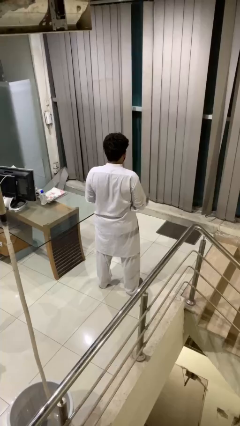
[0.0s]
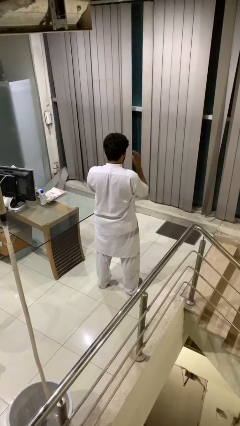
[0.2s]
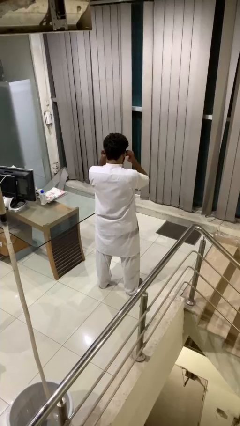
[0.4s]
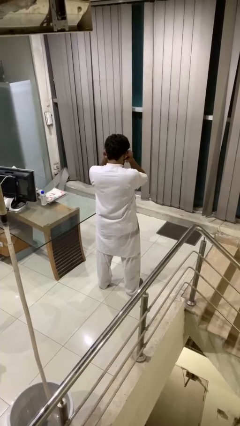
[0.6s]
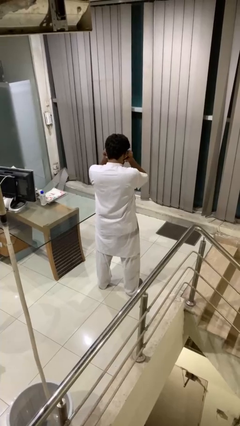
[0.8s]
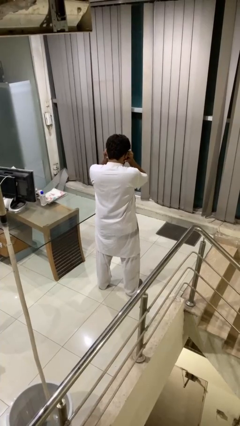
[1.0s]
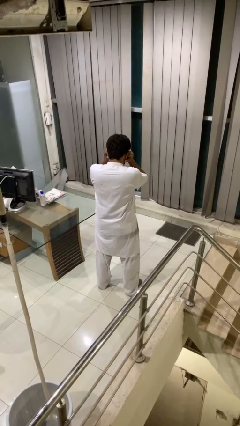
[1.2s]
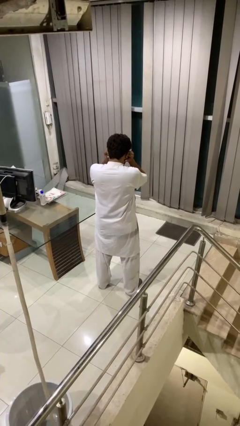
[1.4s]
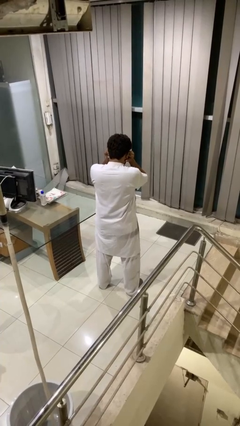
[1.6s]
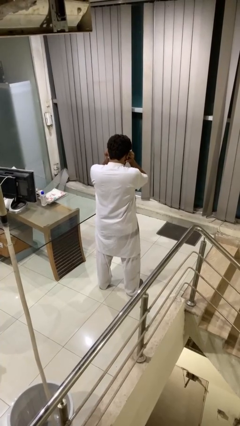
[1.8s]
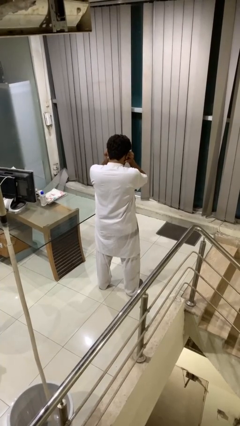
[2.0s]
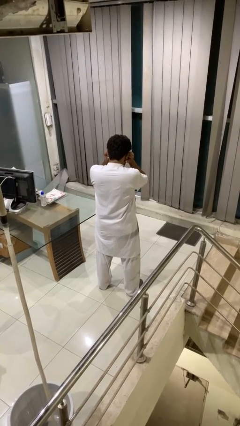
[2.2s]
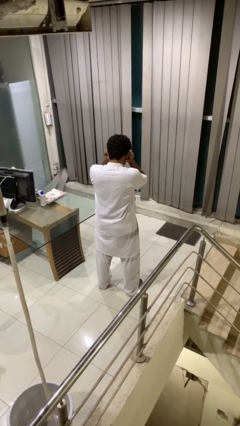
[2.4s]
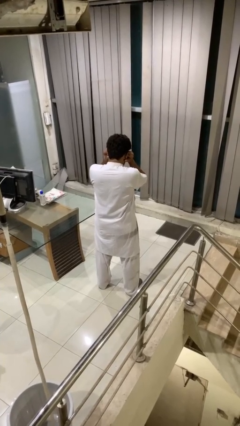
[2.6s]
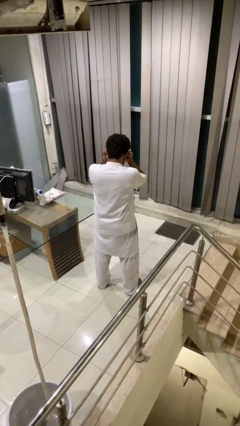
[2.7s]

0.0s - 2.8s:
person puts fingers in ear

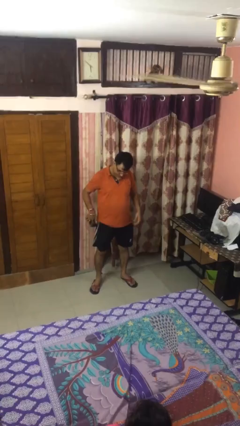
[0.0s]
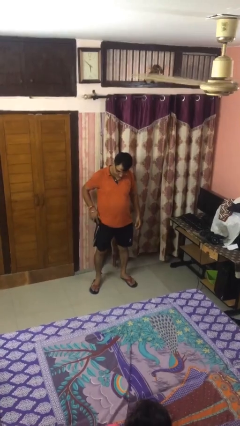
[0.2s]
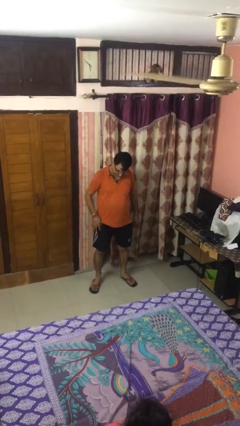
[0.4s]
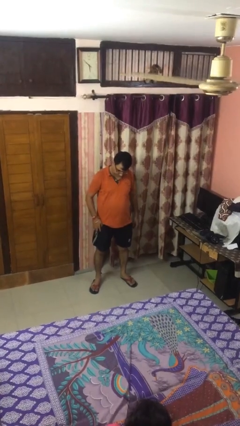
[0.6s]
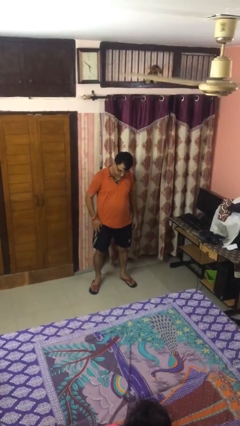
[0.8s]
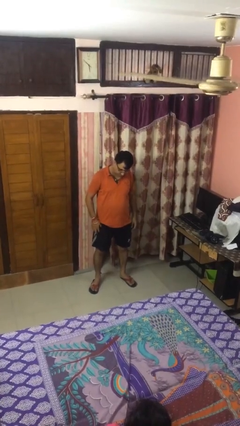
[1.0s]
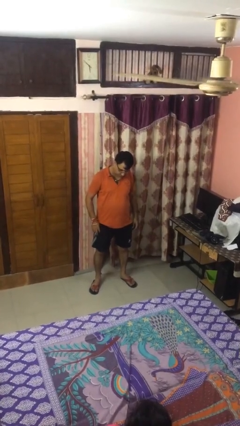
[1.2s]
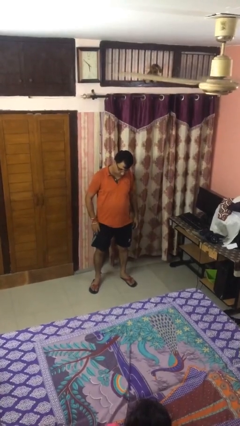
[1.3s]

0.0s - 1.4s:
person puts phone into pocket

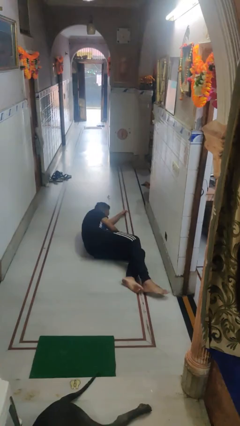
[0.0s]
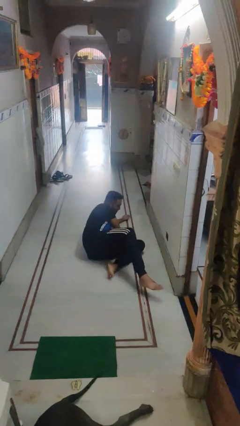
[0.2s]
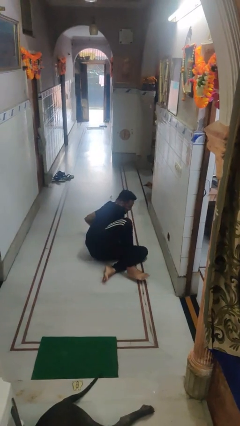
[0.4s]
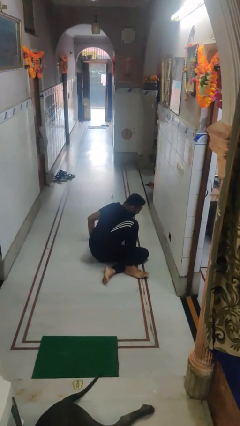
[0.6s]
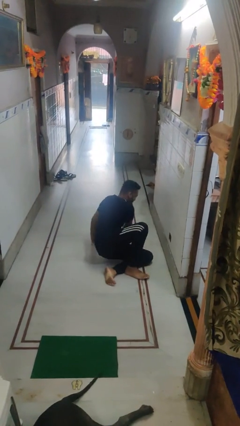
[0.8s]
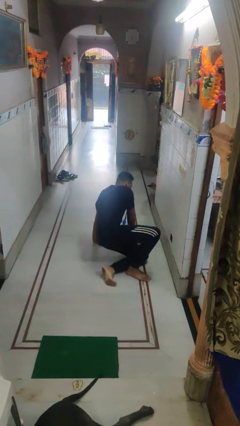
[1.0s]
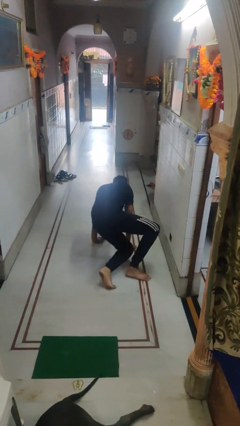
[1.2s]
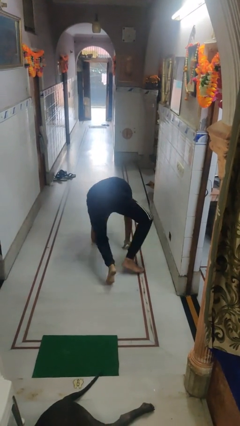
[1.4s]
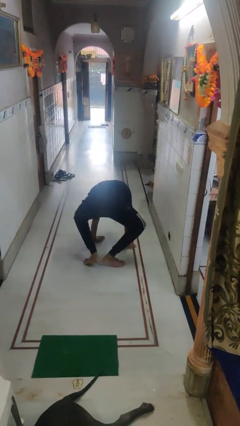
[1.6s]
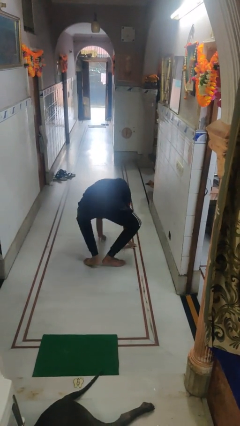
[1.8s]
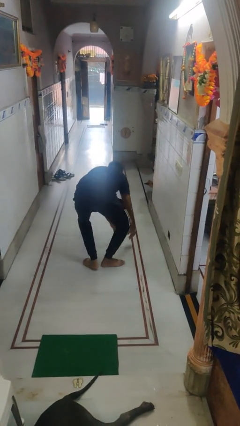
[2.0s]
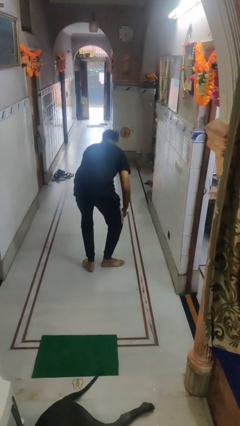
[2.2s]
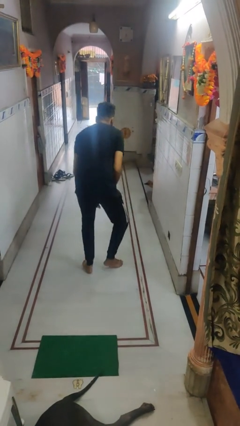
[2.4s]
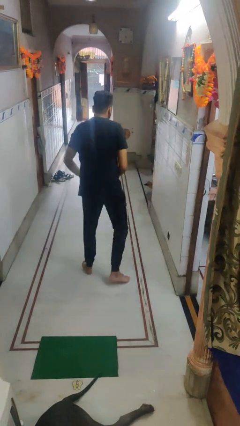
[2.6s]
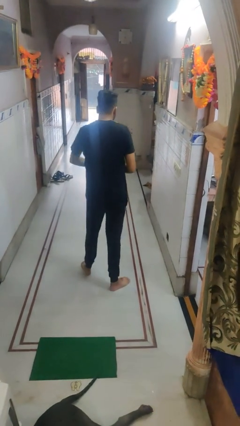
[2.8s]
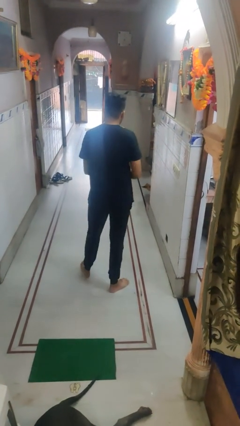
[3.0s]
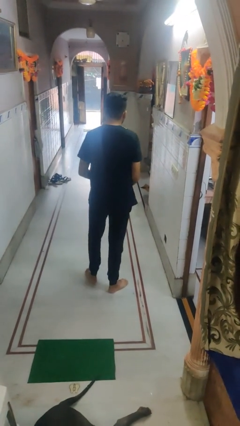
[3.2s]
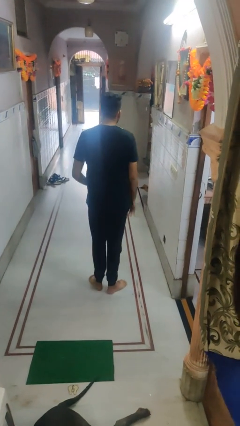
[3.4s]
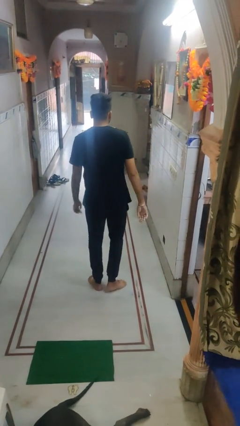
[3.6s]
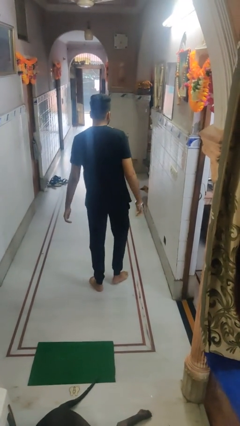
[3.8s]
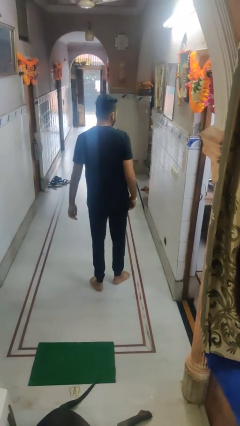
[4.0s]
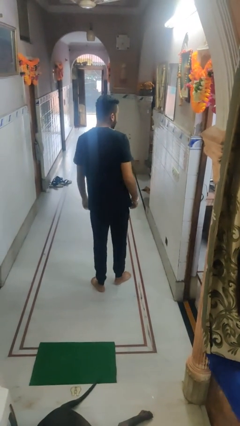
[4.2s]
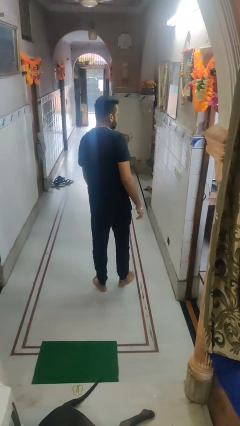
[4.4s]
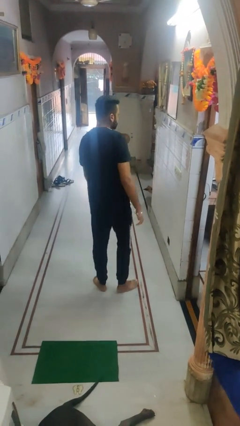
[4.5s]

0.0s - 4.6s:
person stands up from floor

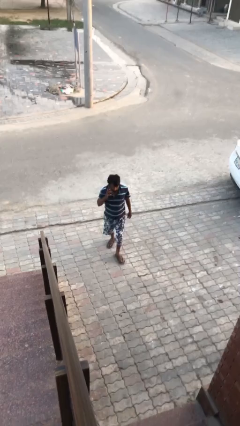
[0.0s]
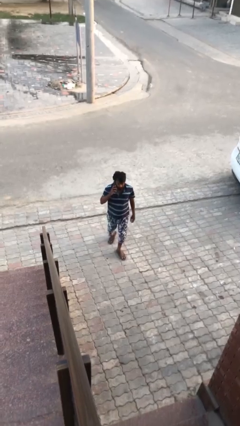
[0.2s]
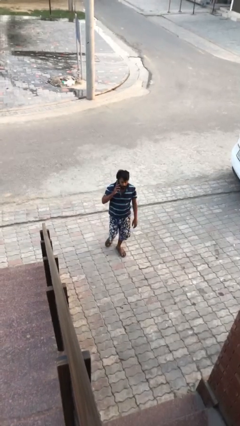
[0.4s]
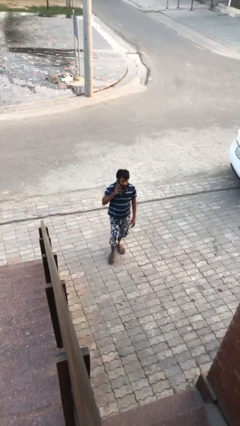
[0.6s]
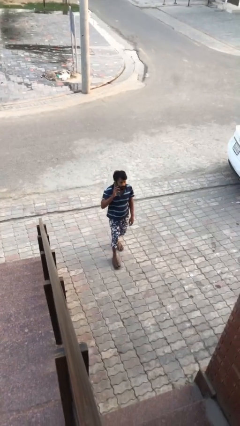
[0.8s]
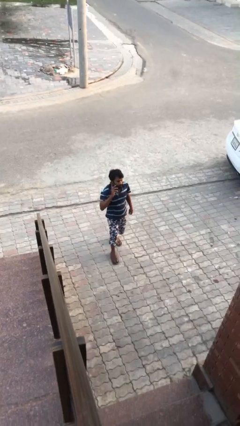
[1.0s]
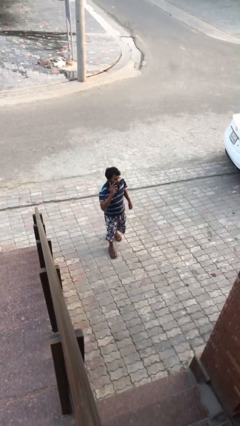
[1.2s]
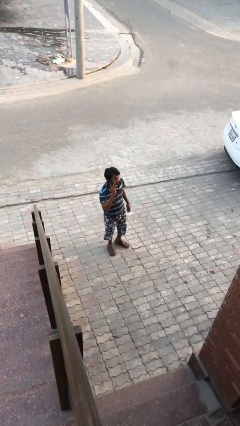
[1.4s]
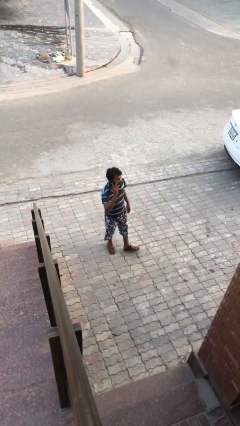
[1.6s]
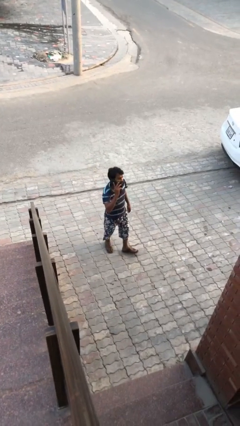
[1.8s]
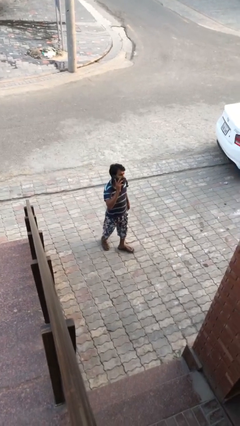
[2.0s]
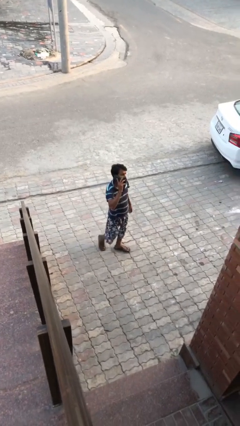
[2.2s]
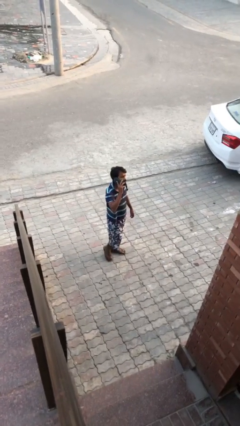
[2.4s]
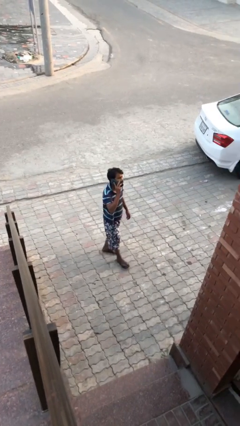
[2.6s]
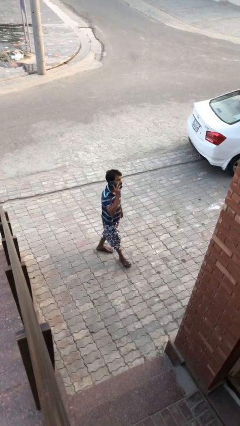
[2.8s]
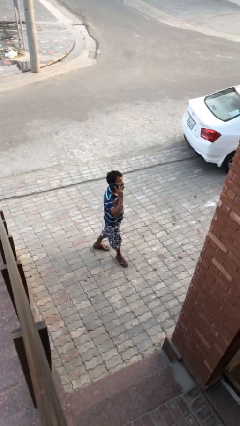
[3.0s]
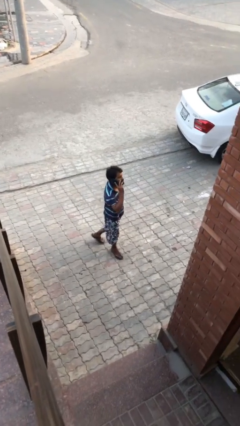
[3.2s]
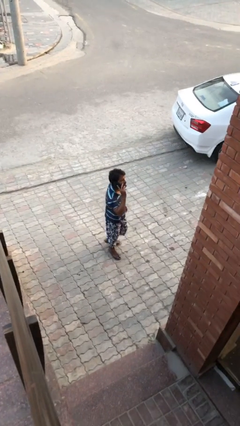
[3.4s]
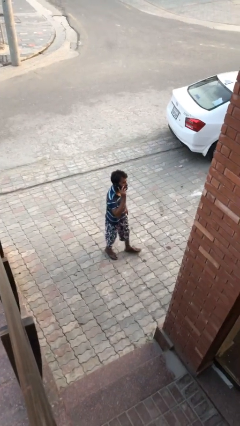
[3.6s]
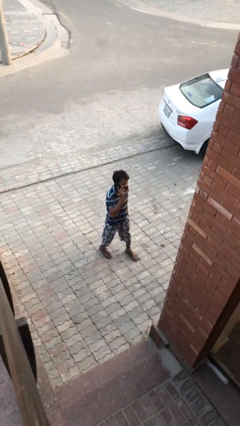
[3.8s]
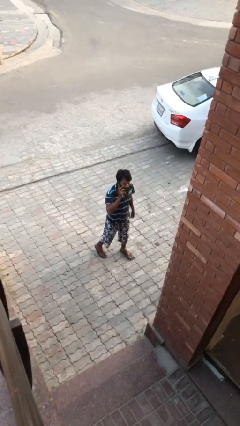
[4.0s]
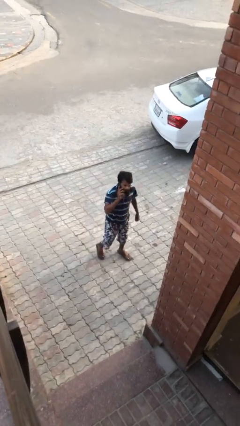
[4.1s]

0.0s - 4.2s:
person talks on phone

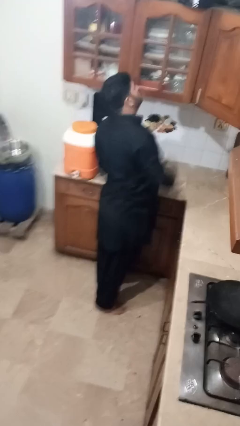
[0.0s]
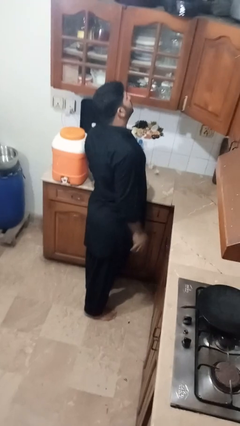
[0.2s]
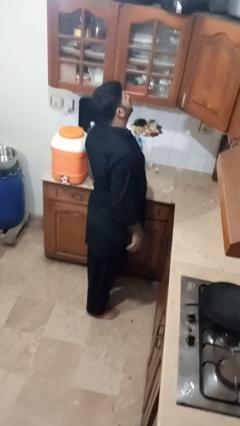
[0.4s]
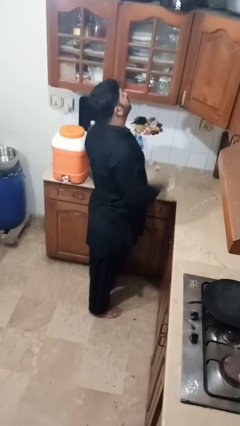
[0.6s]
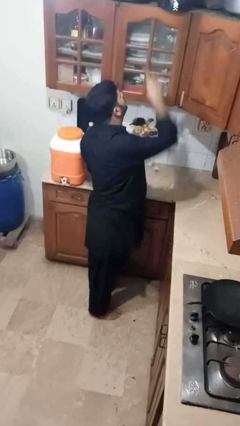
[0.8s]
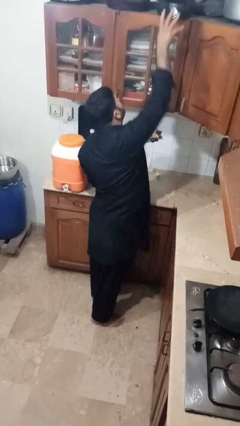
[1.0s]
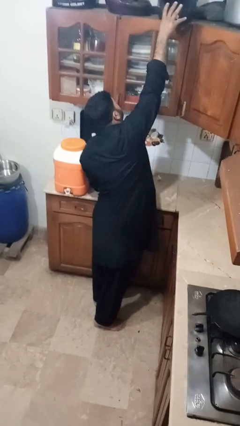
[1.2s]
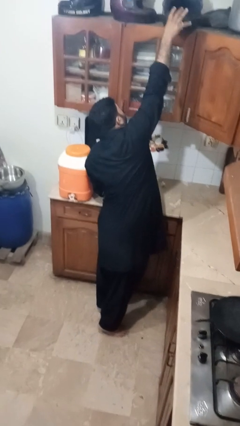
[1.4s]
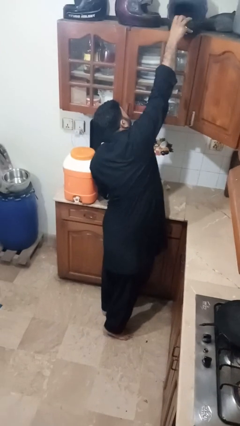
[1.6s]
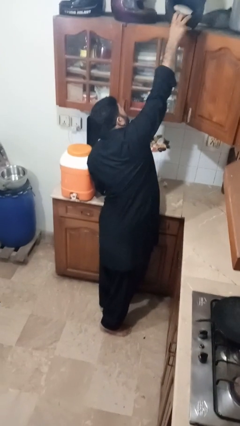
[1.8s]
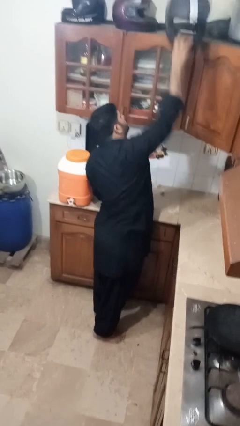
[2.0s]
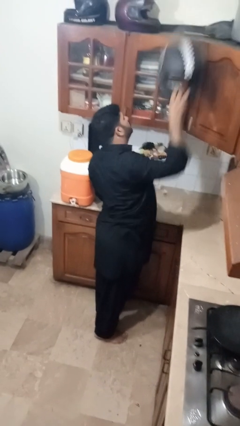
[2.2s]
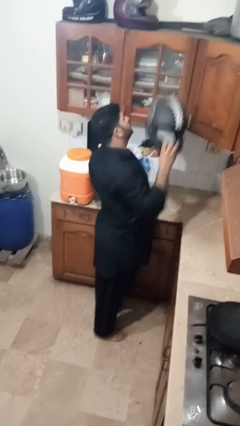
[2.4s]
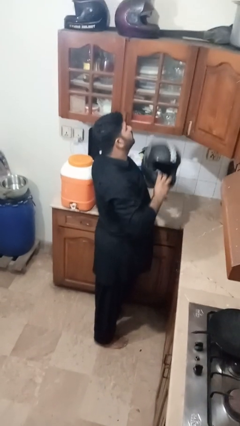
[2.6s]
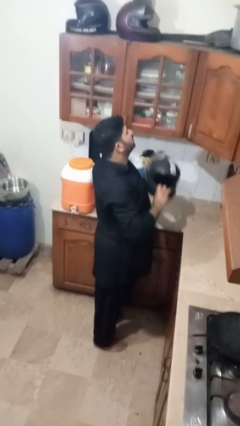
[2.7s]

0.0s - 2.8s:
person picks up object from shelf

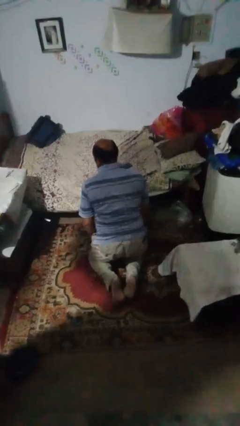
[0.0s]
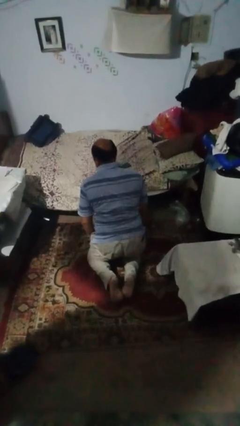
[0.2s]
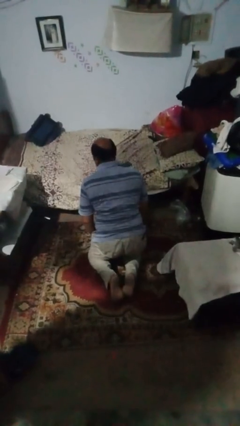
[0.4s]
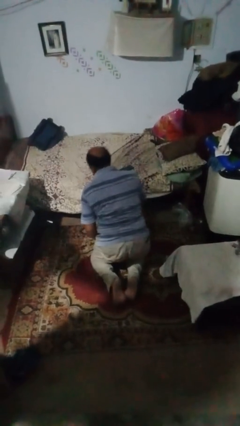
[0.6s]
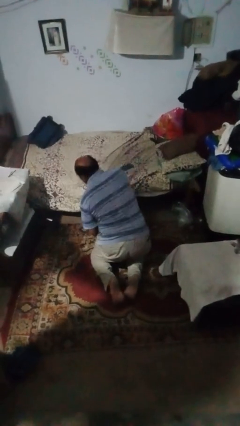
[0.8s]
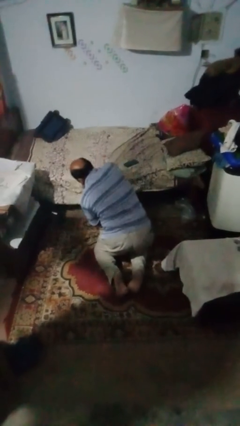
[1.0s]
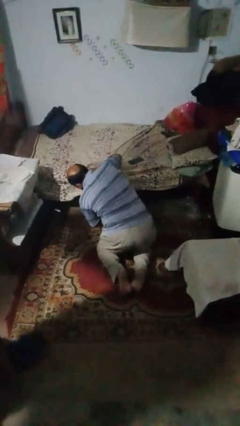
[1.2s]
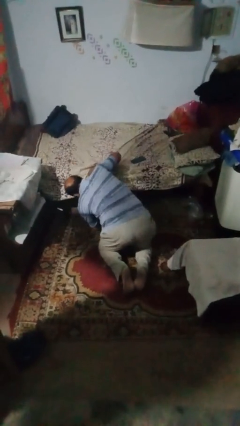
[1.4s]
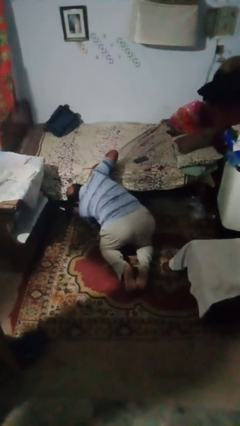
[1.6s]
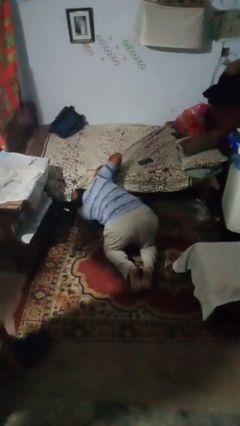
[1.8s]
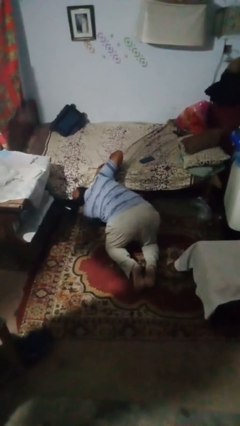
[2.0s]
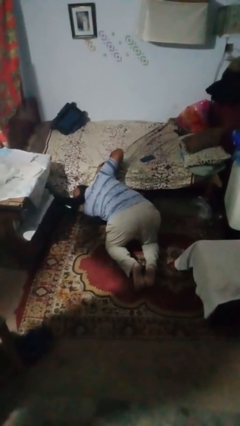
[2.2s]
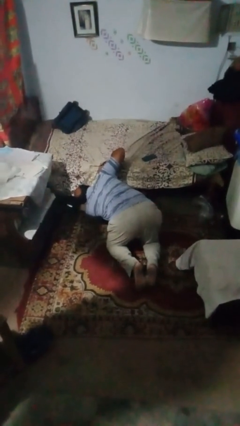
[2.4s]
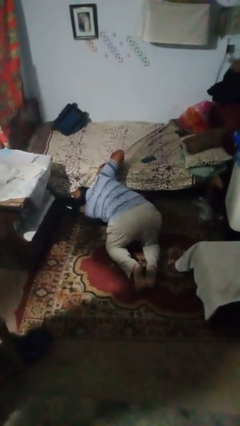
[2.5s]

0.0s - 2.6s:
person searches under bed
